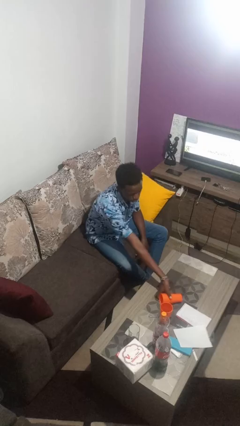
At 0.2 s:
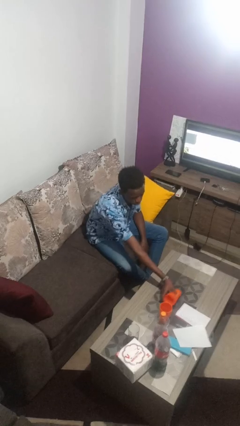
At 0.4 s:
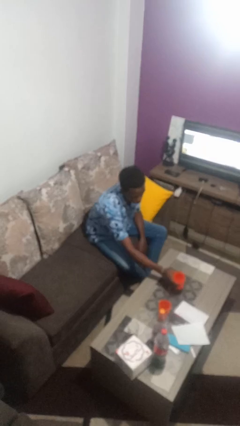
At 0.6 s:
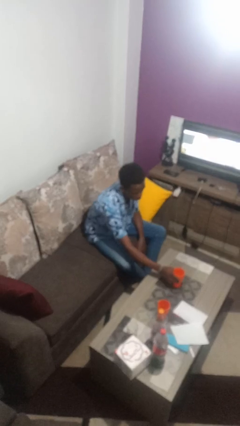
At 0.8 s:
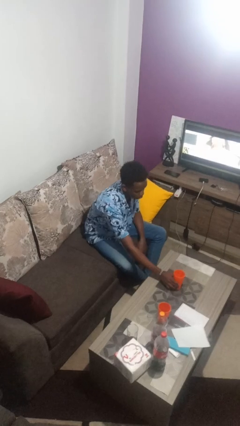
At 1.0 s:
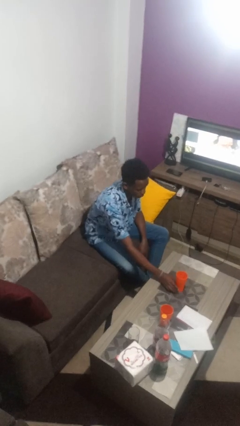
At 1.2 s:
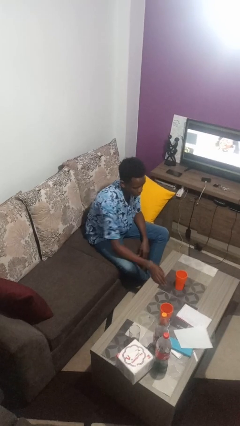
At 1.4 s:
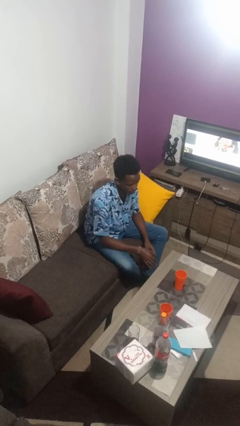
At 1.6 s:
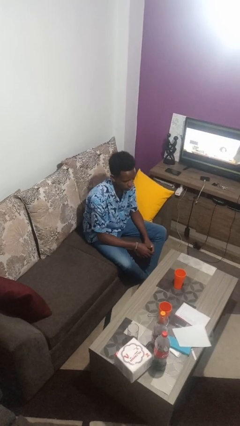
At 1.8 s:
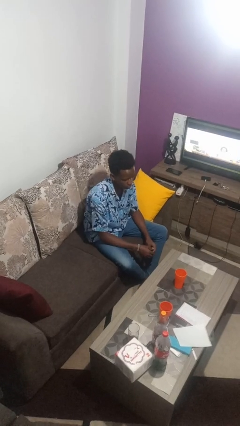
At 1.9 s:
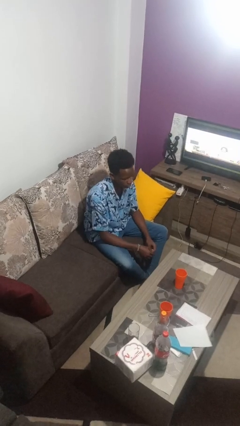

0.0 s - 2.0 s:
person sets upright glass

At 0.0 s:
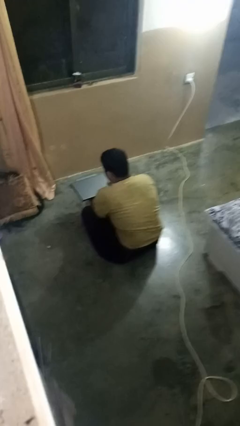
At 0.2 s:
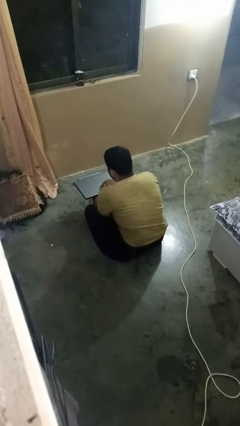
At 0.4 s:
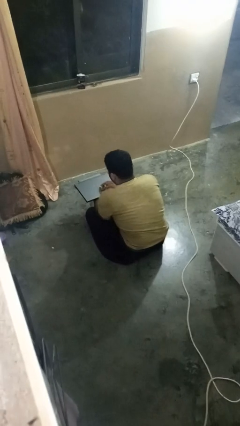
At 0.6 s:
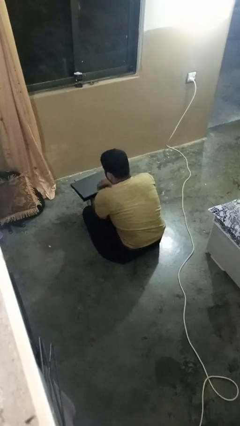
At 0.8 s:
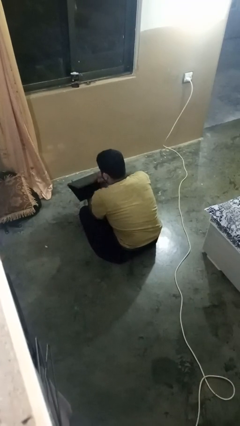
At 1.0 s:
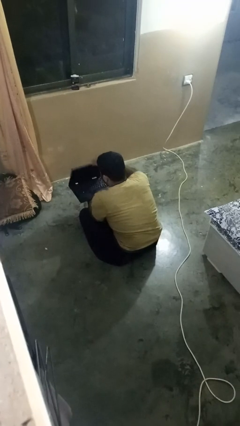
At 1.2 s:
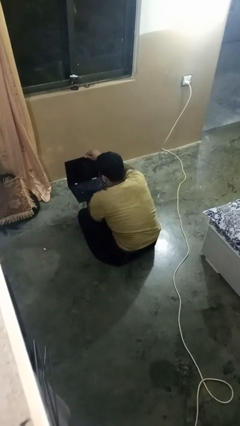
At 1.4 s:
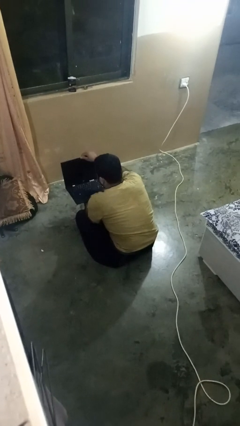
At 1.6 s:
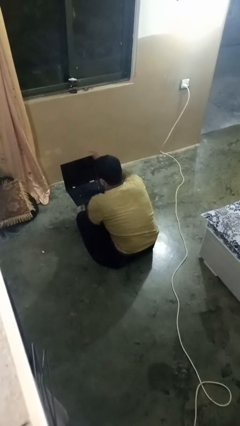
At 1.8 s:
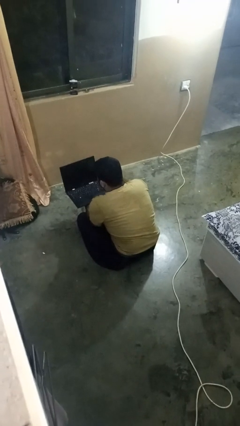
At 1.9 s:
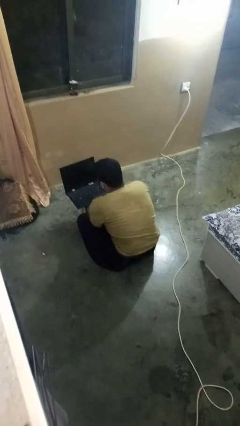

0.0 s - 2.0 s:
person opens laptop

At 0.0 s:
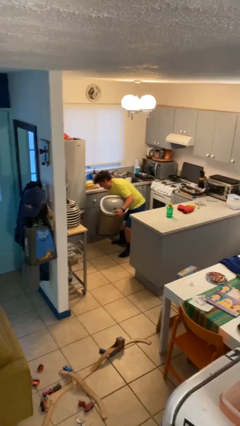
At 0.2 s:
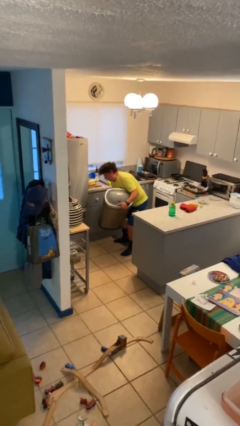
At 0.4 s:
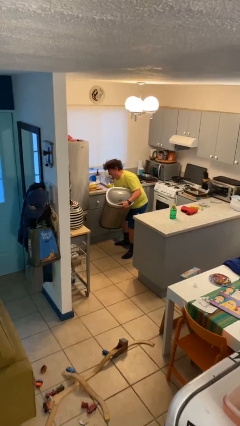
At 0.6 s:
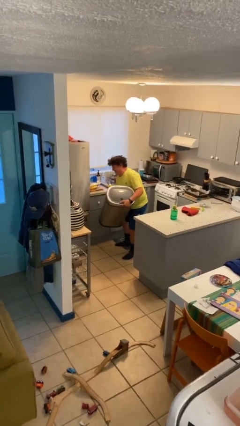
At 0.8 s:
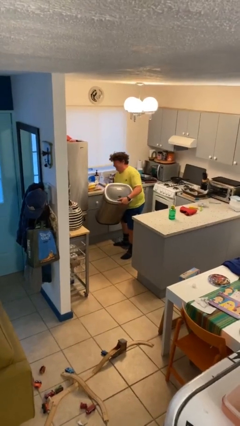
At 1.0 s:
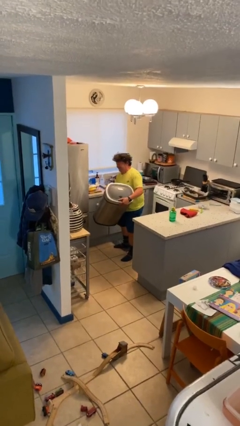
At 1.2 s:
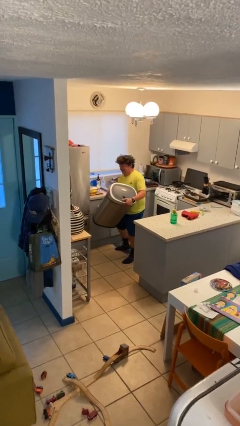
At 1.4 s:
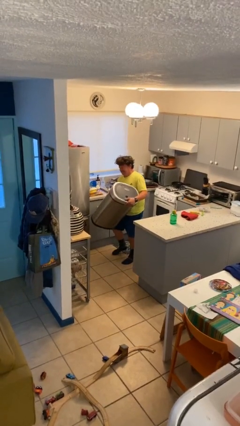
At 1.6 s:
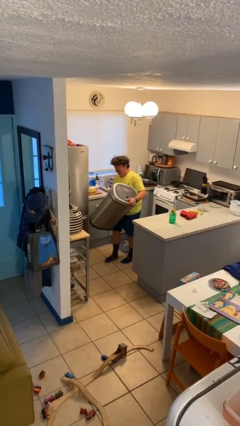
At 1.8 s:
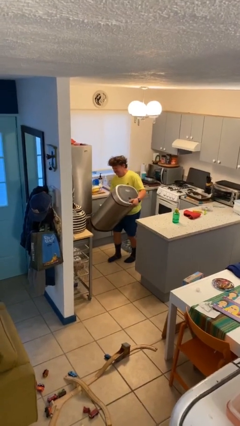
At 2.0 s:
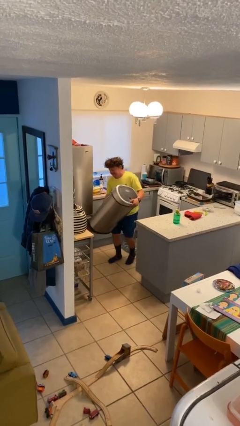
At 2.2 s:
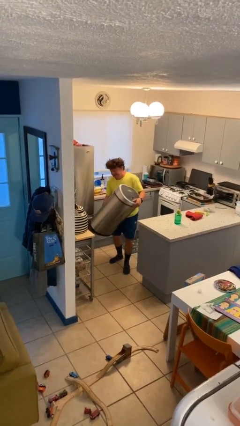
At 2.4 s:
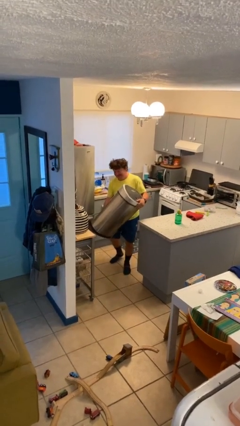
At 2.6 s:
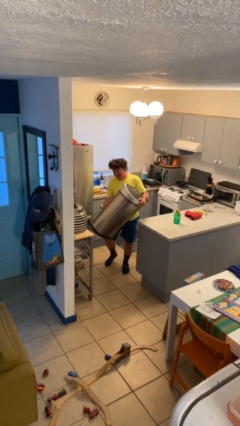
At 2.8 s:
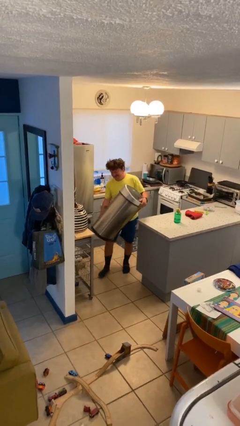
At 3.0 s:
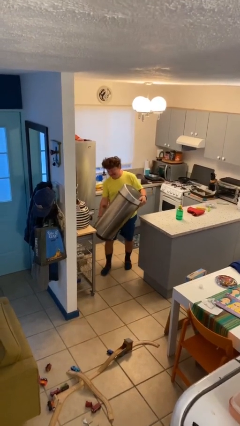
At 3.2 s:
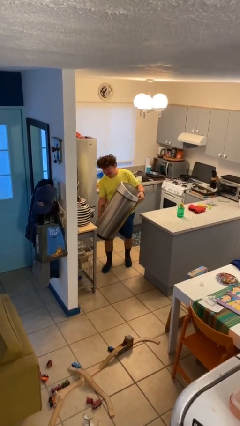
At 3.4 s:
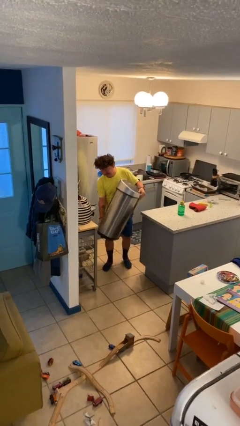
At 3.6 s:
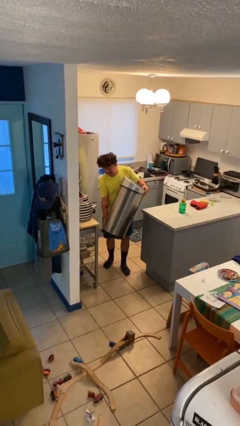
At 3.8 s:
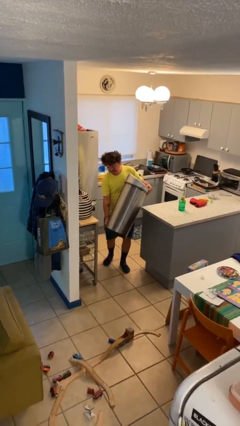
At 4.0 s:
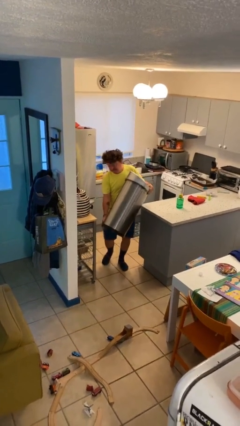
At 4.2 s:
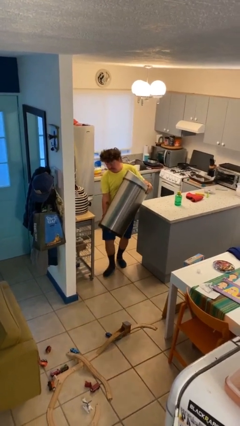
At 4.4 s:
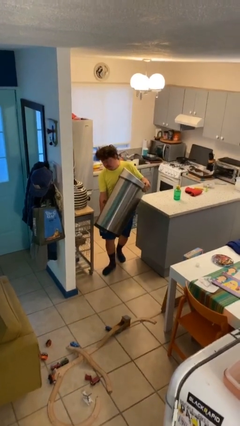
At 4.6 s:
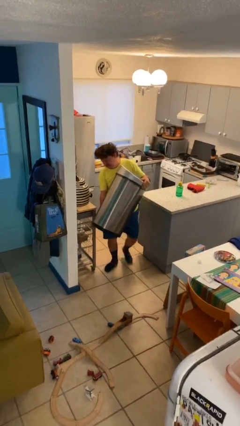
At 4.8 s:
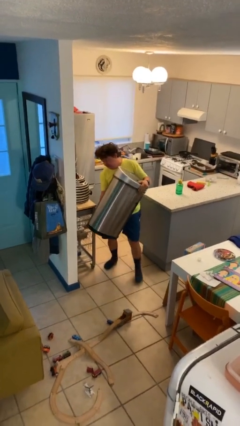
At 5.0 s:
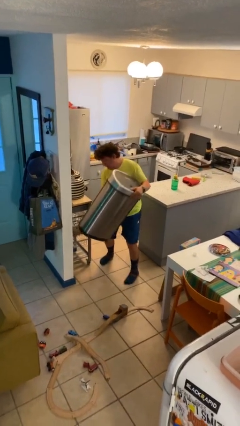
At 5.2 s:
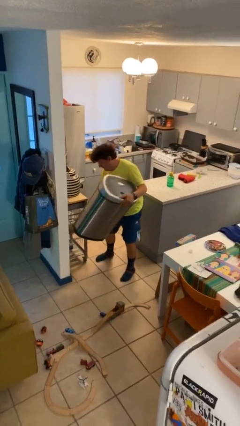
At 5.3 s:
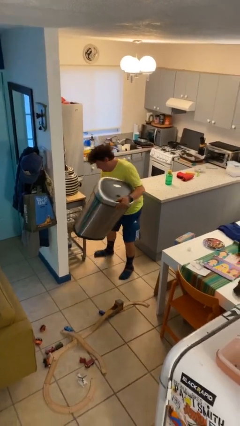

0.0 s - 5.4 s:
person carries heavy object

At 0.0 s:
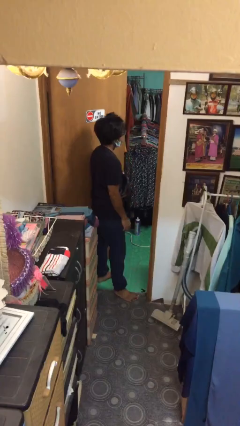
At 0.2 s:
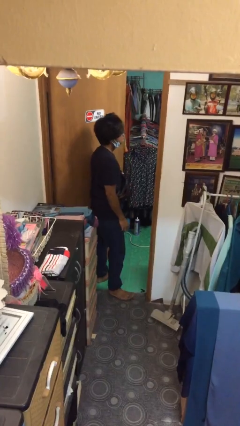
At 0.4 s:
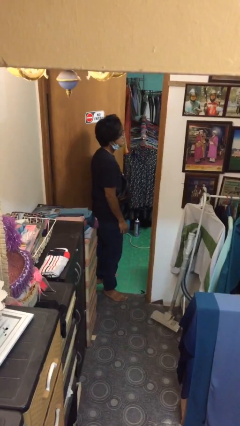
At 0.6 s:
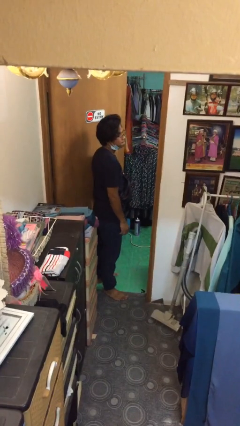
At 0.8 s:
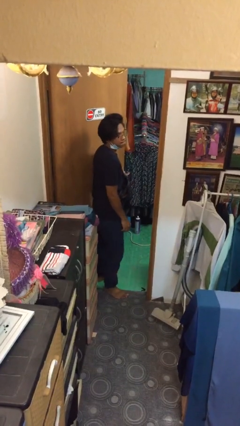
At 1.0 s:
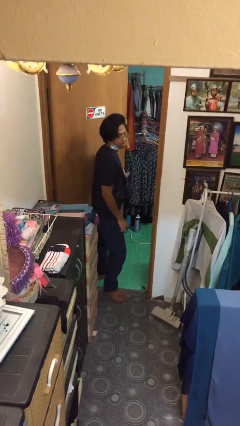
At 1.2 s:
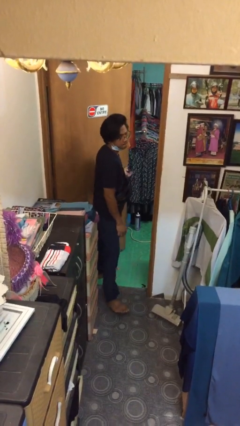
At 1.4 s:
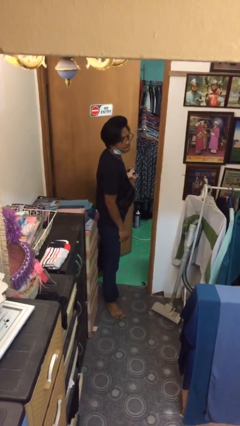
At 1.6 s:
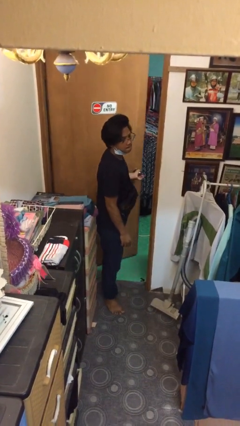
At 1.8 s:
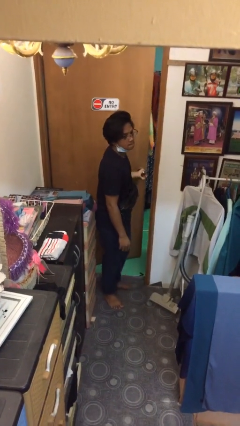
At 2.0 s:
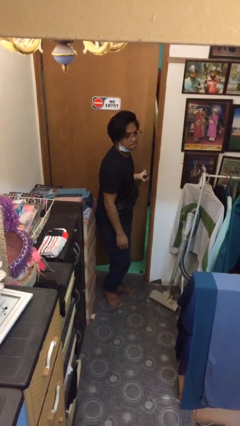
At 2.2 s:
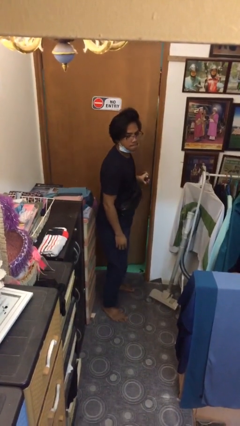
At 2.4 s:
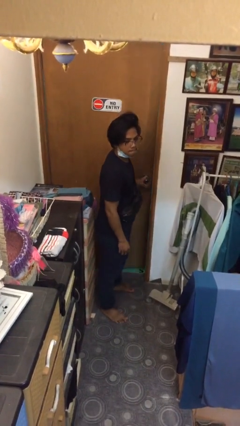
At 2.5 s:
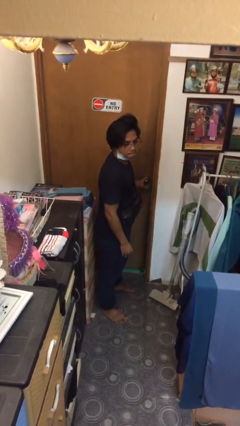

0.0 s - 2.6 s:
person closes facility door

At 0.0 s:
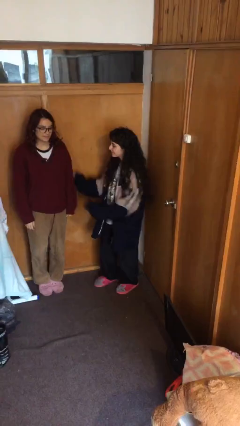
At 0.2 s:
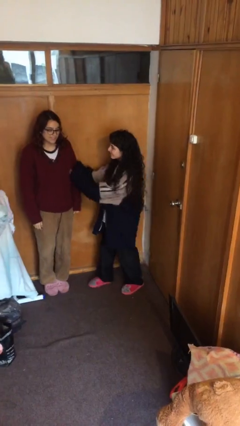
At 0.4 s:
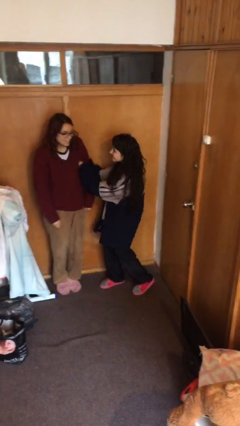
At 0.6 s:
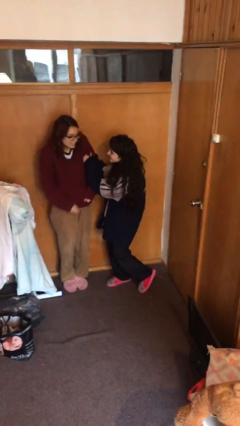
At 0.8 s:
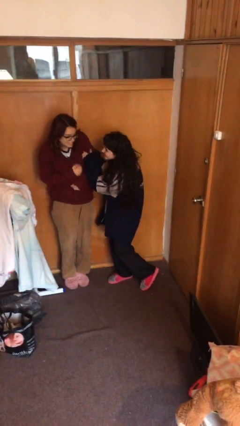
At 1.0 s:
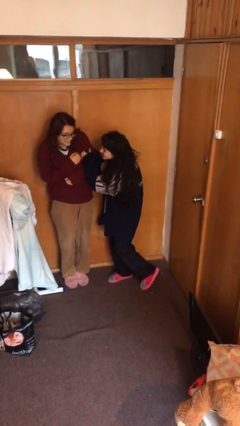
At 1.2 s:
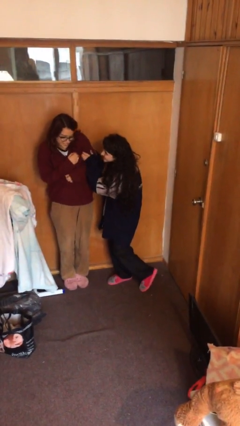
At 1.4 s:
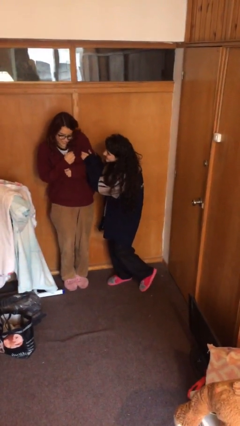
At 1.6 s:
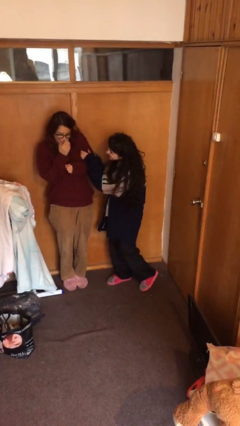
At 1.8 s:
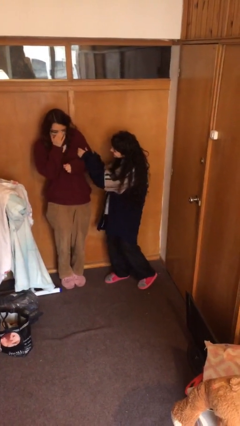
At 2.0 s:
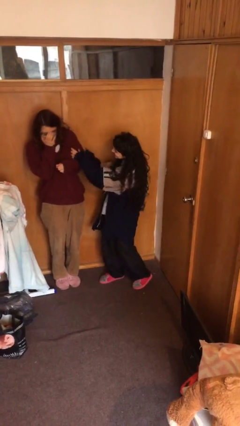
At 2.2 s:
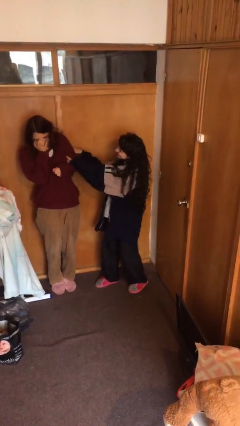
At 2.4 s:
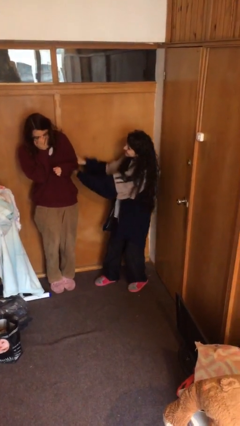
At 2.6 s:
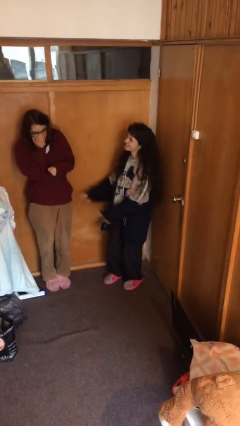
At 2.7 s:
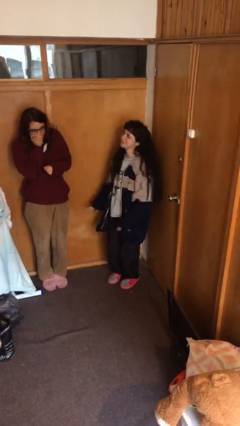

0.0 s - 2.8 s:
person tickles person

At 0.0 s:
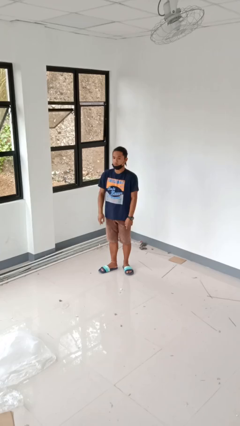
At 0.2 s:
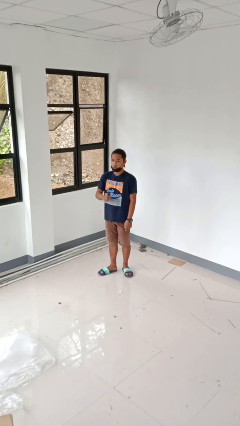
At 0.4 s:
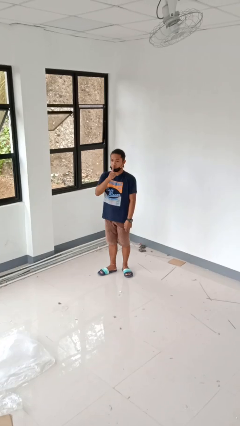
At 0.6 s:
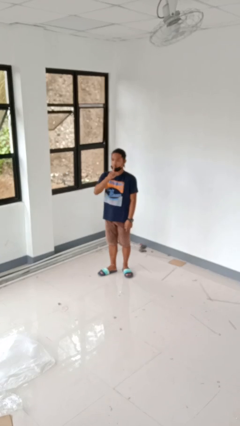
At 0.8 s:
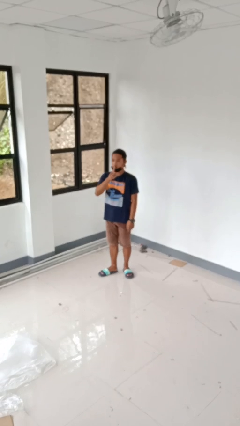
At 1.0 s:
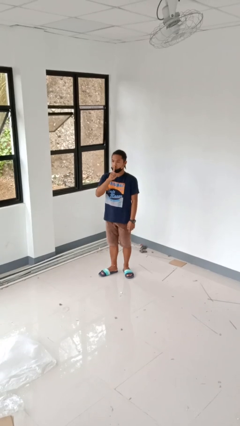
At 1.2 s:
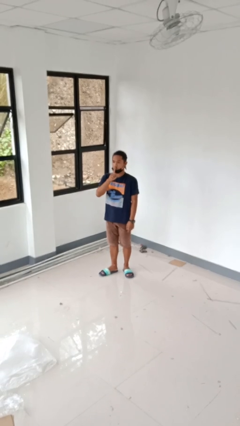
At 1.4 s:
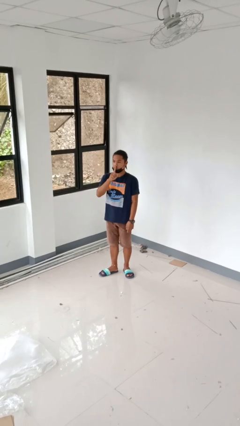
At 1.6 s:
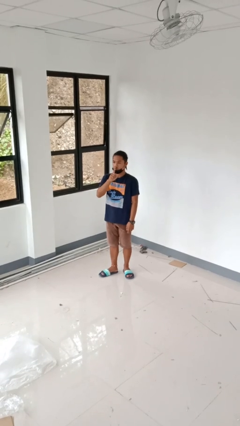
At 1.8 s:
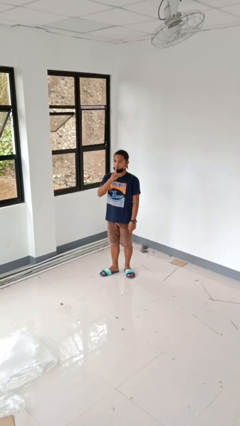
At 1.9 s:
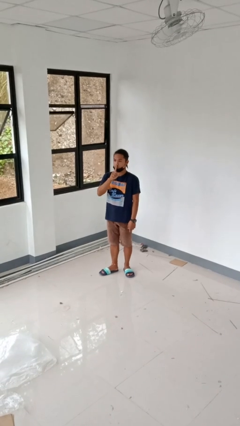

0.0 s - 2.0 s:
person gestures be quiet

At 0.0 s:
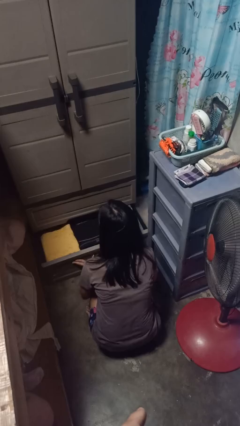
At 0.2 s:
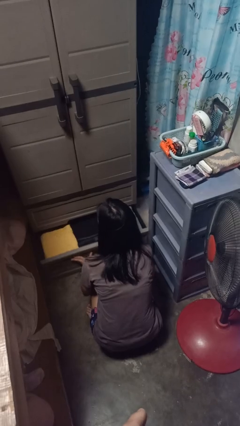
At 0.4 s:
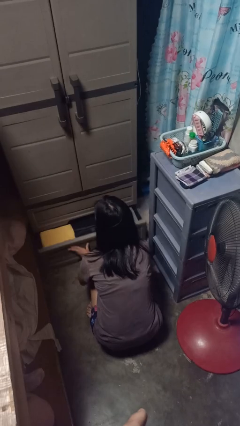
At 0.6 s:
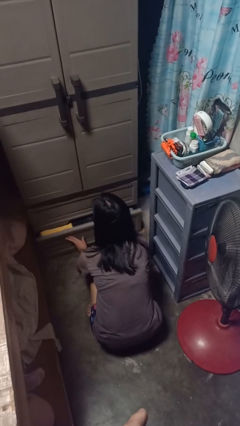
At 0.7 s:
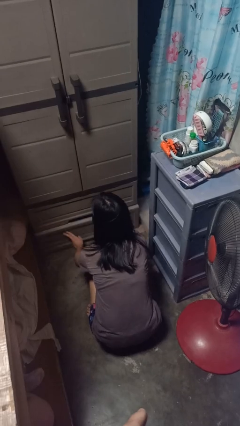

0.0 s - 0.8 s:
person closes dresser drawer
